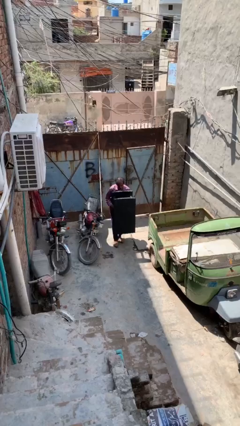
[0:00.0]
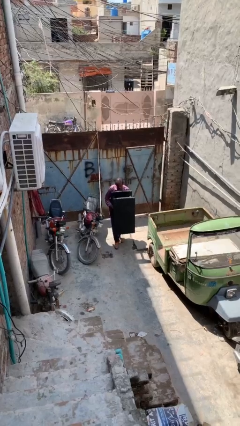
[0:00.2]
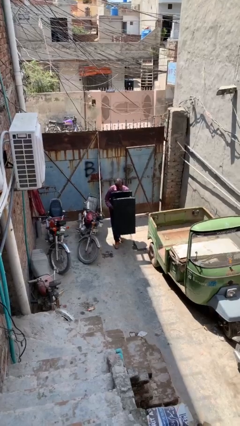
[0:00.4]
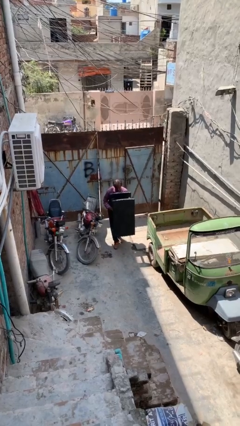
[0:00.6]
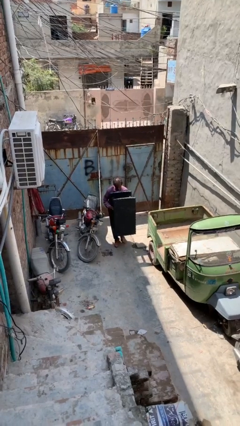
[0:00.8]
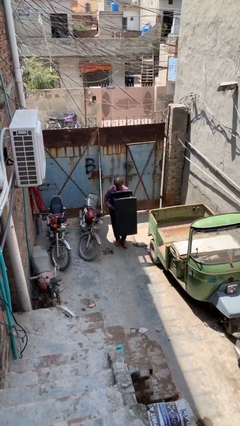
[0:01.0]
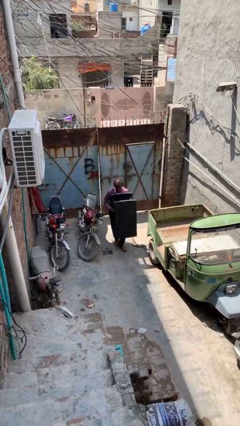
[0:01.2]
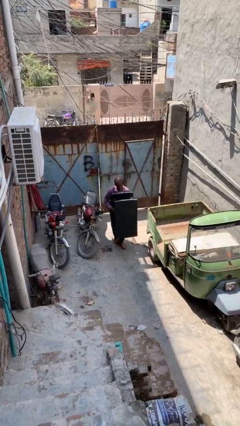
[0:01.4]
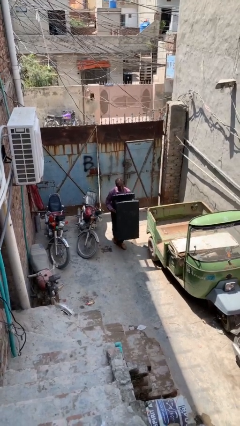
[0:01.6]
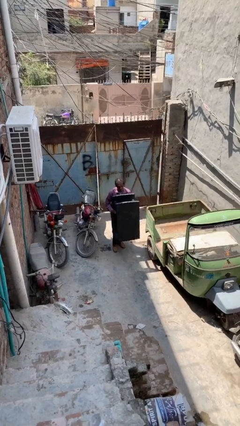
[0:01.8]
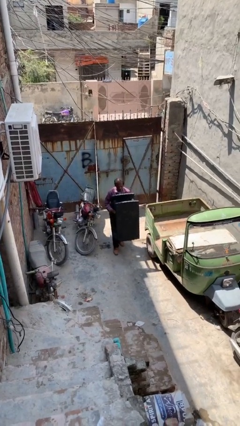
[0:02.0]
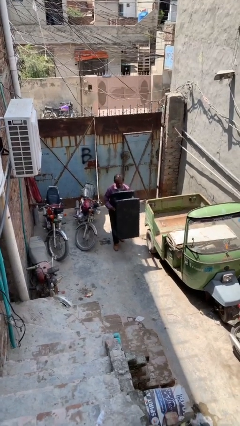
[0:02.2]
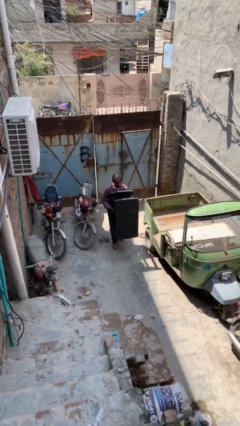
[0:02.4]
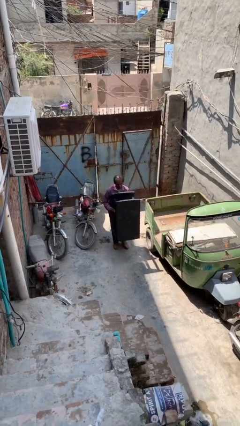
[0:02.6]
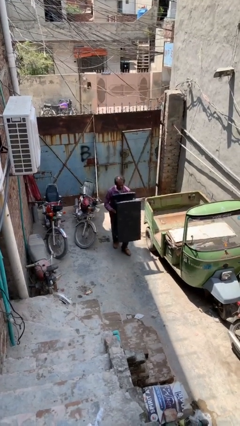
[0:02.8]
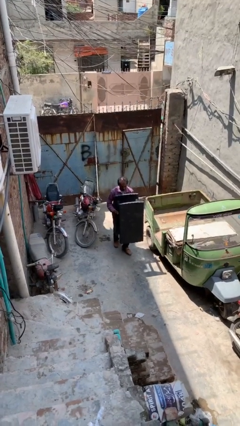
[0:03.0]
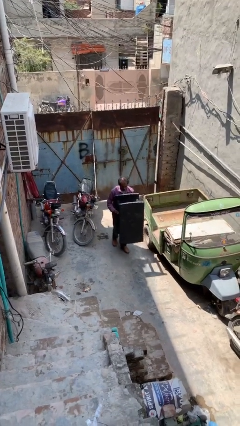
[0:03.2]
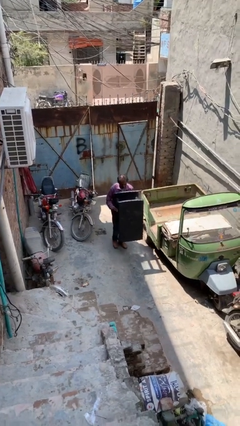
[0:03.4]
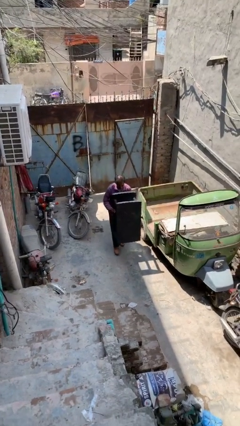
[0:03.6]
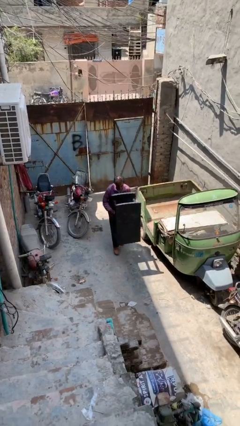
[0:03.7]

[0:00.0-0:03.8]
person carries heavy object

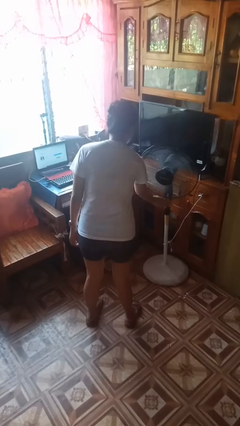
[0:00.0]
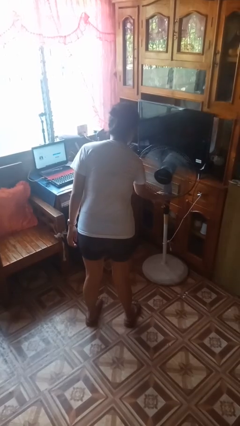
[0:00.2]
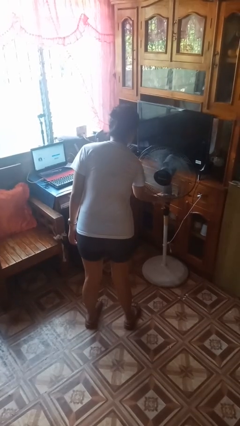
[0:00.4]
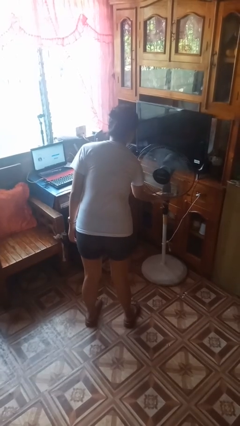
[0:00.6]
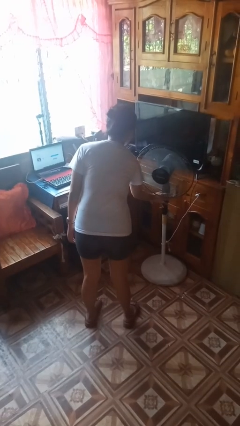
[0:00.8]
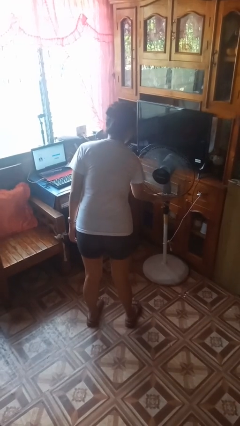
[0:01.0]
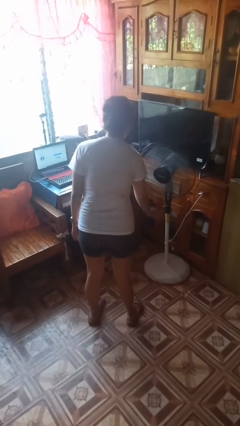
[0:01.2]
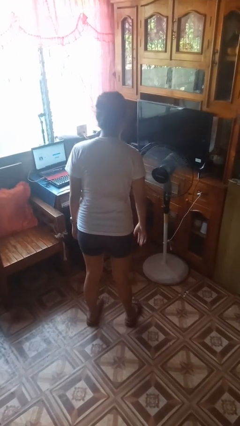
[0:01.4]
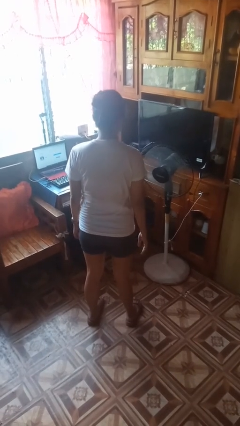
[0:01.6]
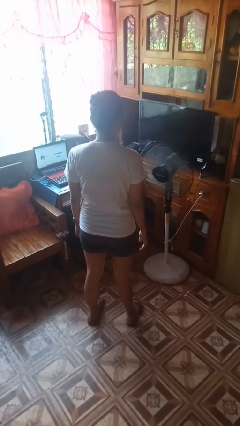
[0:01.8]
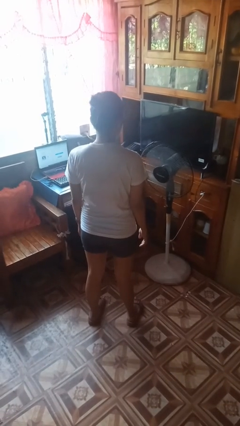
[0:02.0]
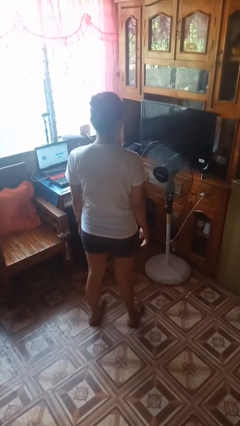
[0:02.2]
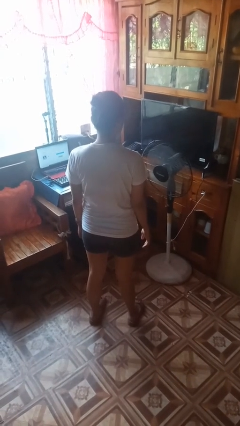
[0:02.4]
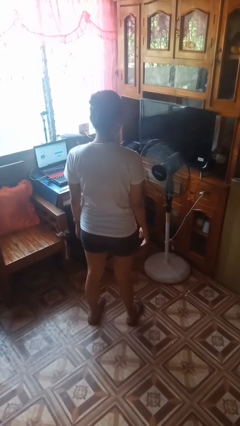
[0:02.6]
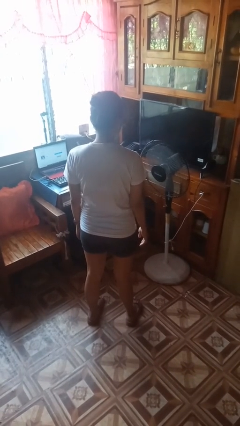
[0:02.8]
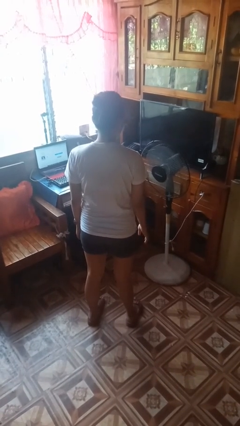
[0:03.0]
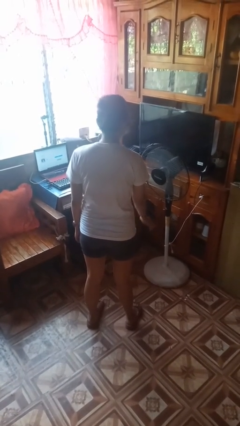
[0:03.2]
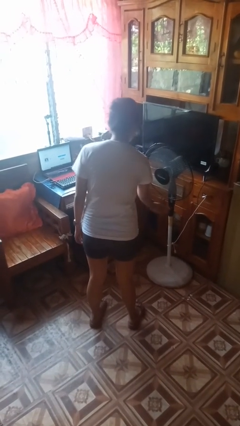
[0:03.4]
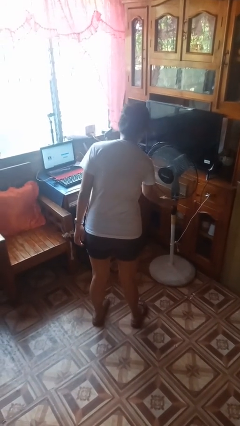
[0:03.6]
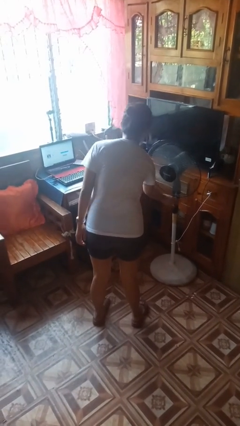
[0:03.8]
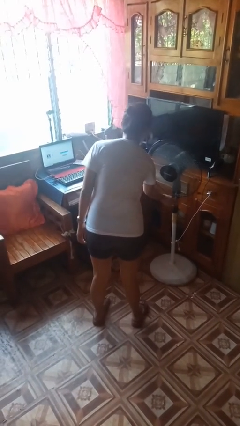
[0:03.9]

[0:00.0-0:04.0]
person turns on fan

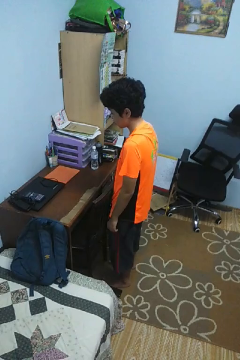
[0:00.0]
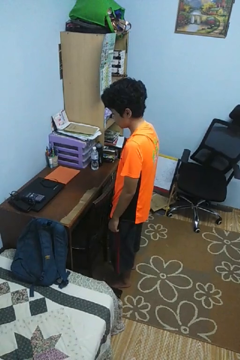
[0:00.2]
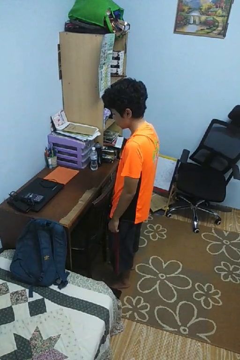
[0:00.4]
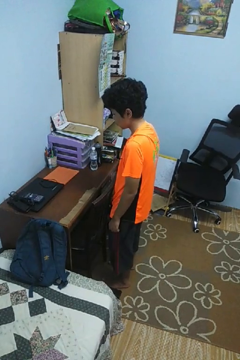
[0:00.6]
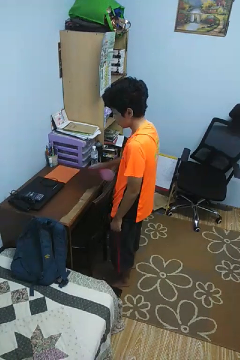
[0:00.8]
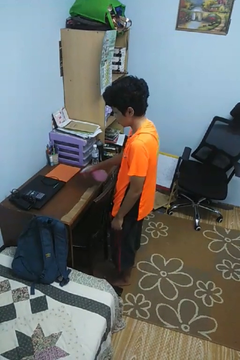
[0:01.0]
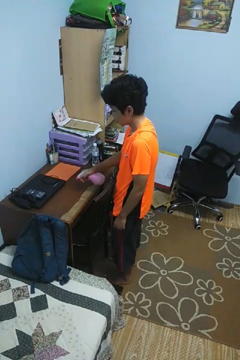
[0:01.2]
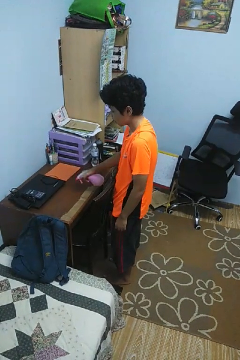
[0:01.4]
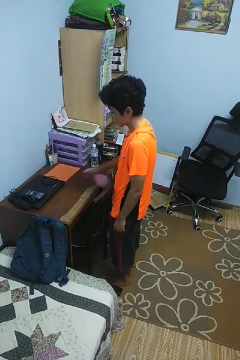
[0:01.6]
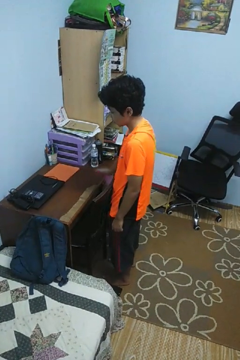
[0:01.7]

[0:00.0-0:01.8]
person sprays from bottle

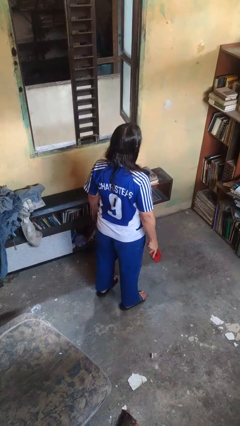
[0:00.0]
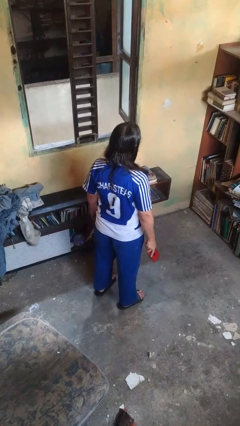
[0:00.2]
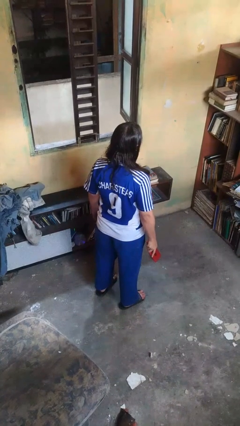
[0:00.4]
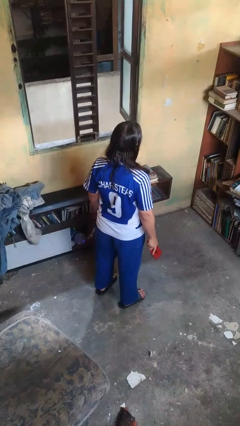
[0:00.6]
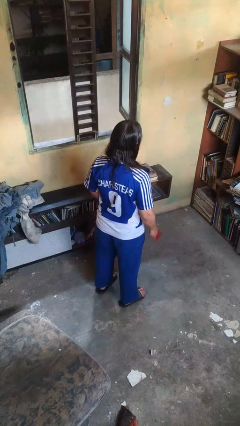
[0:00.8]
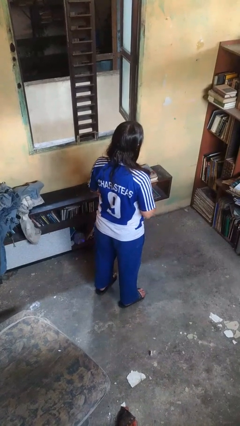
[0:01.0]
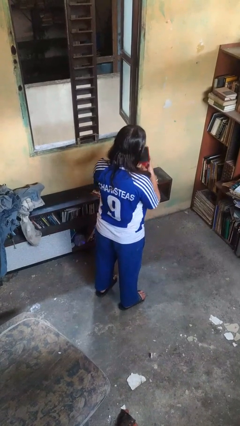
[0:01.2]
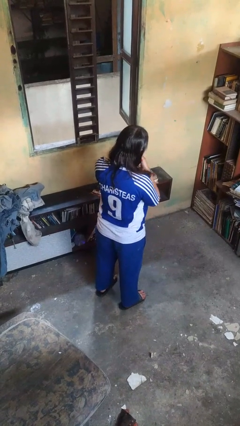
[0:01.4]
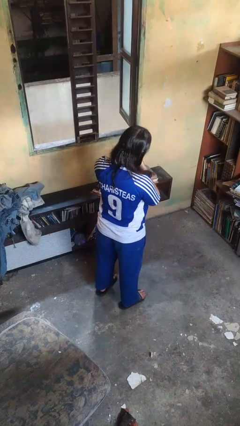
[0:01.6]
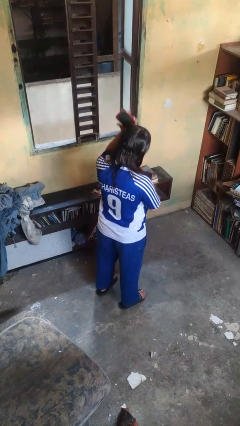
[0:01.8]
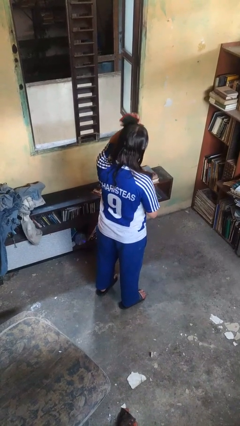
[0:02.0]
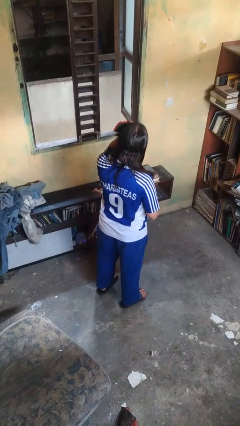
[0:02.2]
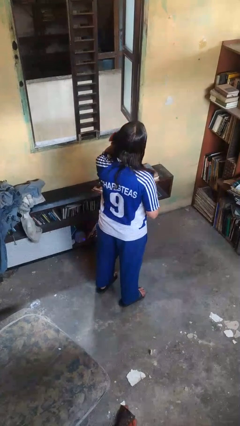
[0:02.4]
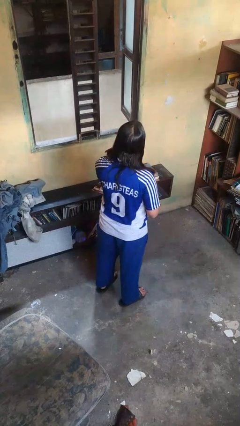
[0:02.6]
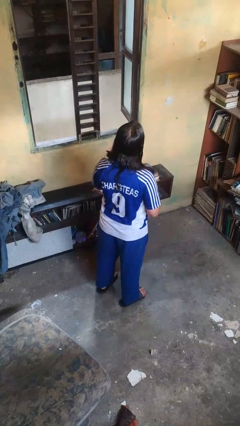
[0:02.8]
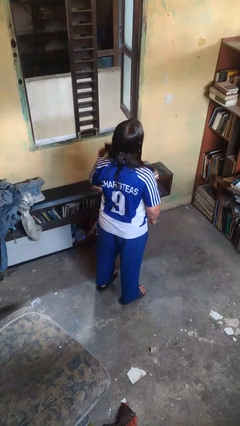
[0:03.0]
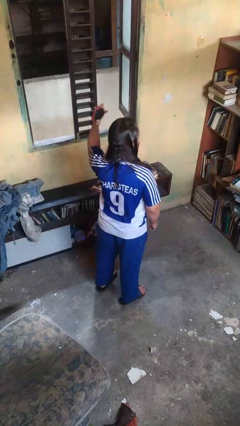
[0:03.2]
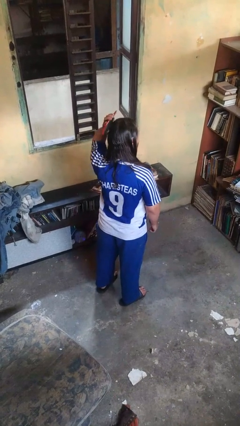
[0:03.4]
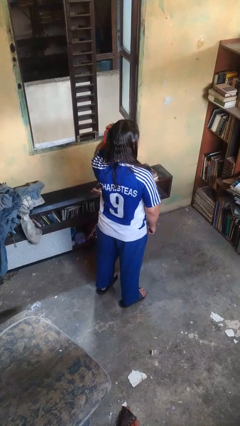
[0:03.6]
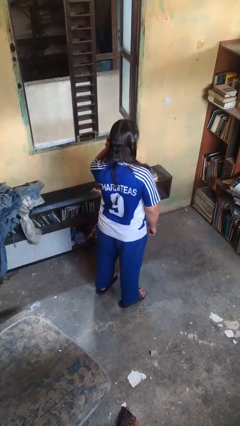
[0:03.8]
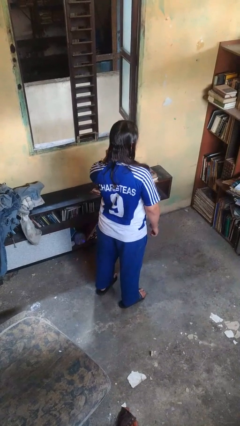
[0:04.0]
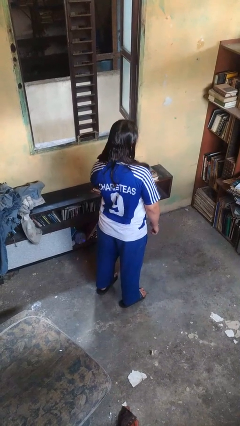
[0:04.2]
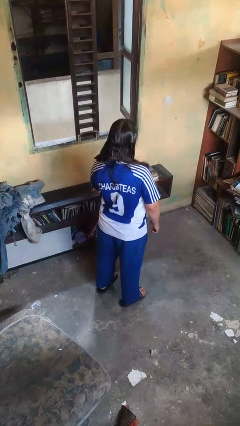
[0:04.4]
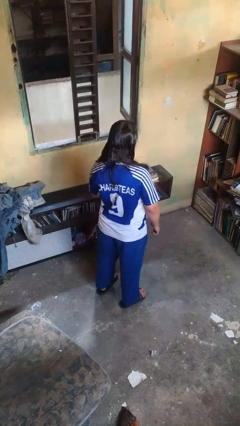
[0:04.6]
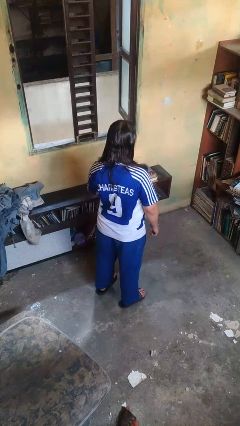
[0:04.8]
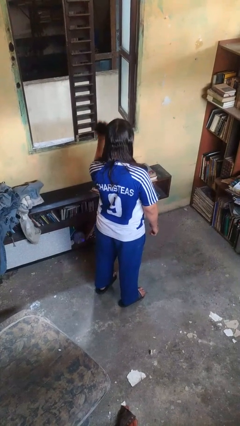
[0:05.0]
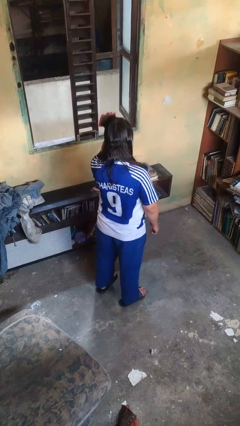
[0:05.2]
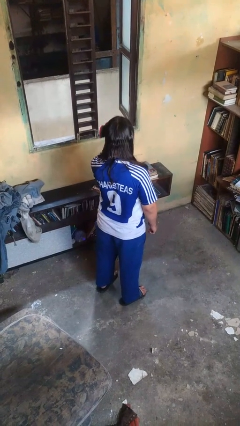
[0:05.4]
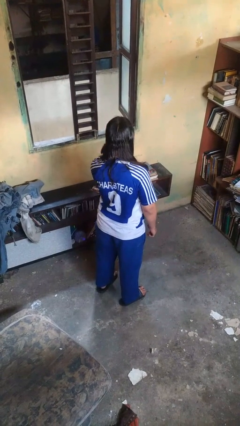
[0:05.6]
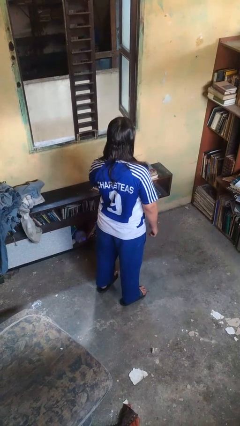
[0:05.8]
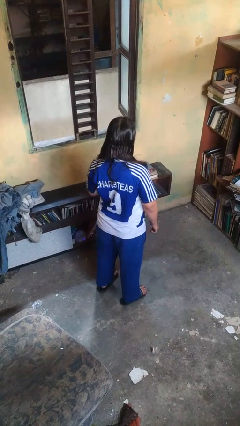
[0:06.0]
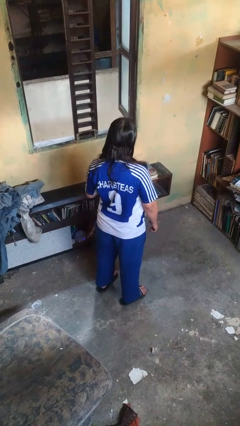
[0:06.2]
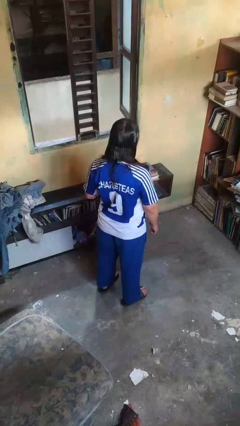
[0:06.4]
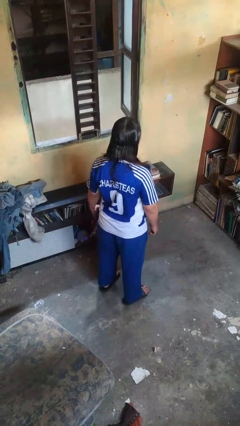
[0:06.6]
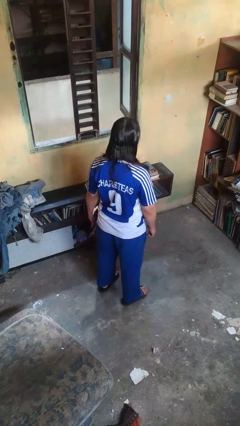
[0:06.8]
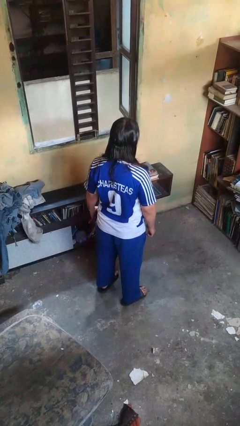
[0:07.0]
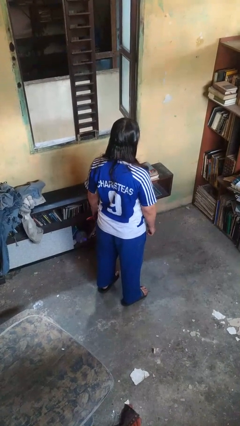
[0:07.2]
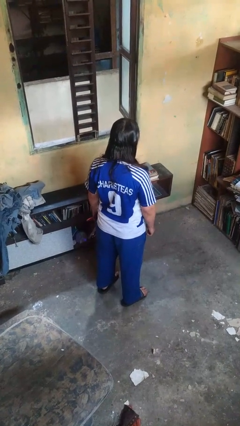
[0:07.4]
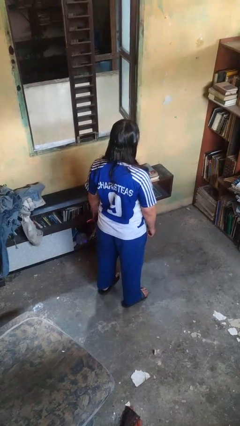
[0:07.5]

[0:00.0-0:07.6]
person brushes hair

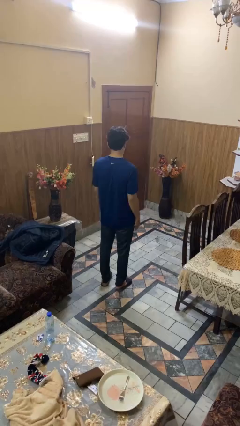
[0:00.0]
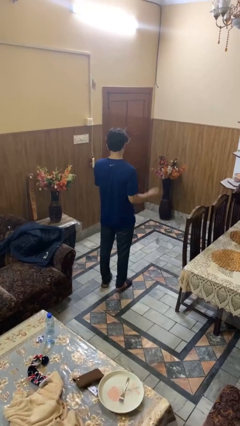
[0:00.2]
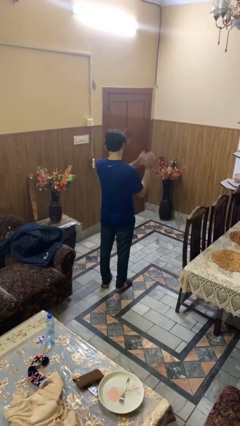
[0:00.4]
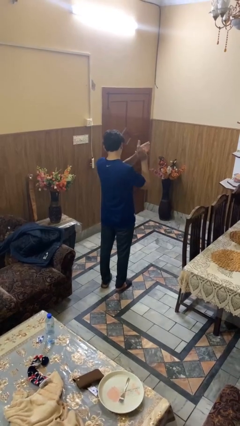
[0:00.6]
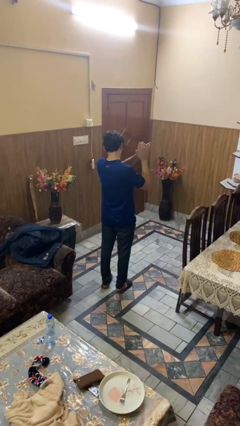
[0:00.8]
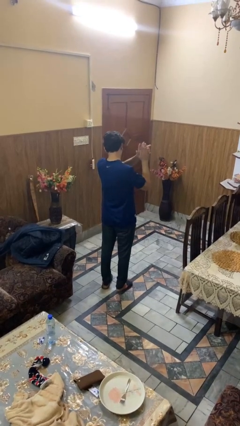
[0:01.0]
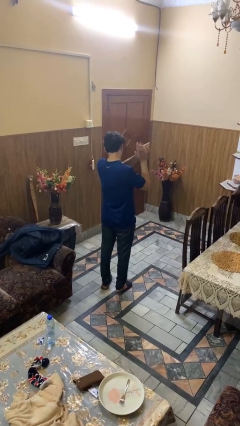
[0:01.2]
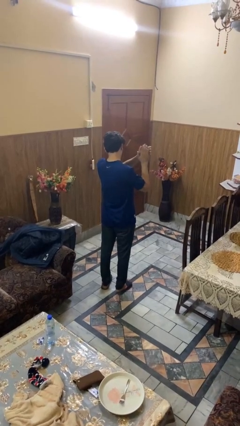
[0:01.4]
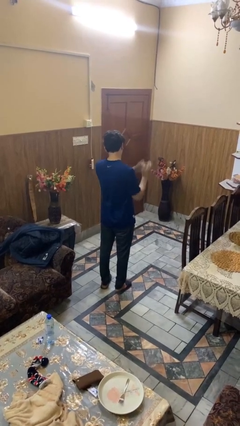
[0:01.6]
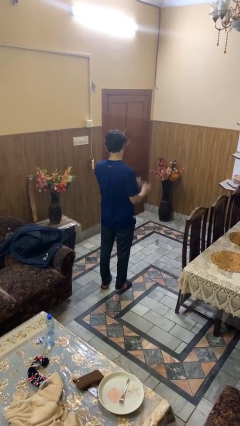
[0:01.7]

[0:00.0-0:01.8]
person claps hands
